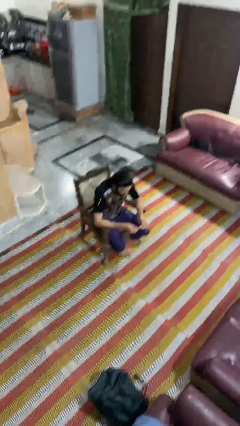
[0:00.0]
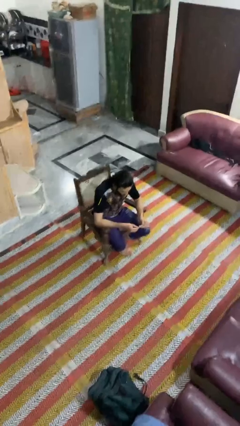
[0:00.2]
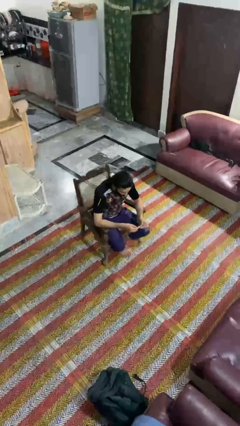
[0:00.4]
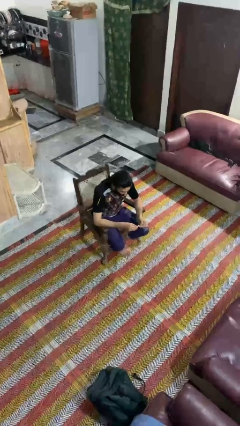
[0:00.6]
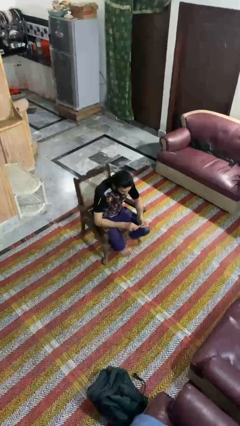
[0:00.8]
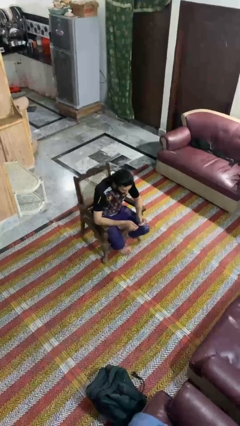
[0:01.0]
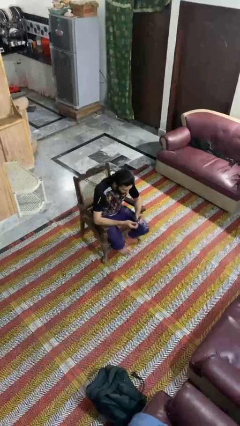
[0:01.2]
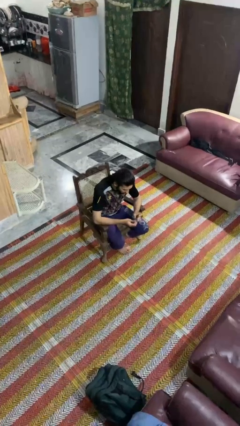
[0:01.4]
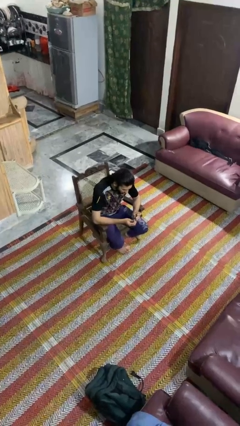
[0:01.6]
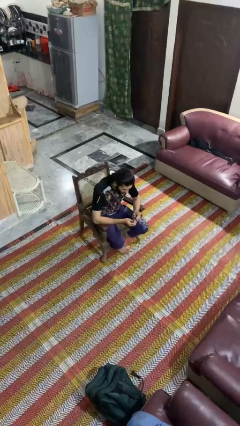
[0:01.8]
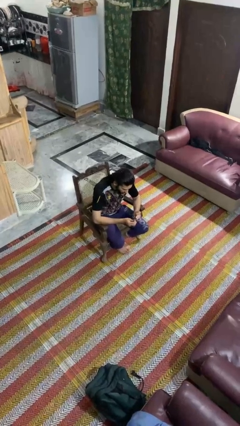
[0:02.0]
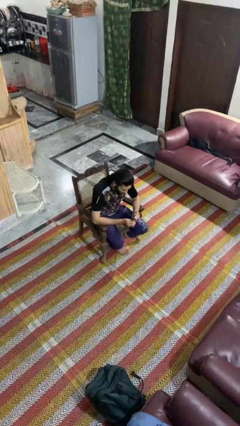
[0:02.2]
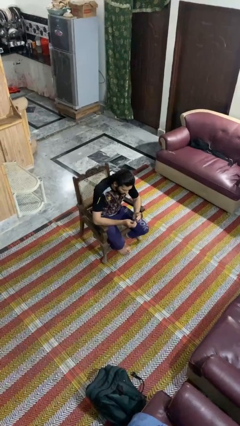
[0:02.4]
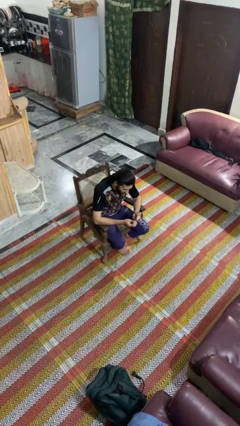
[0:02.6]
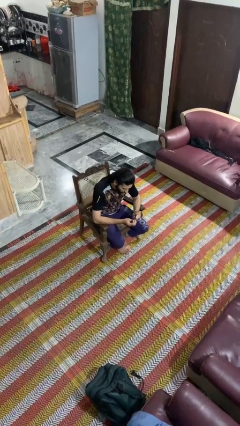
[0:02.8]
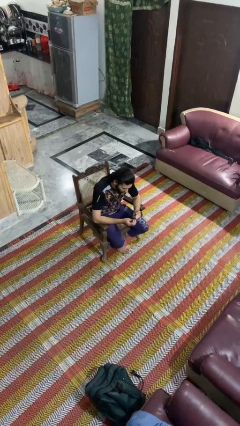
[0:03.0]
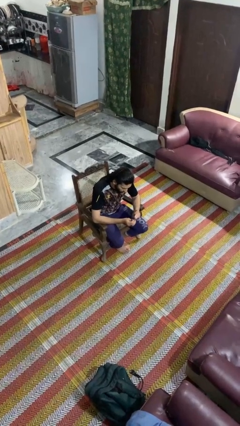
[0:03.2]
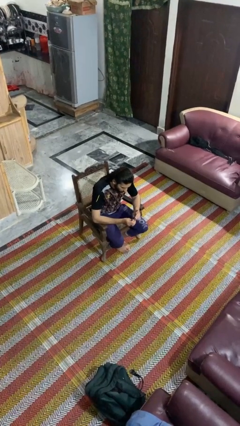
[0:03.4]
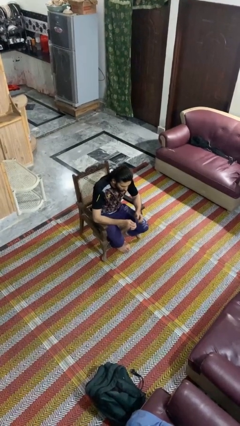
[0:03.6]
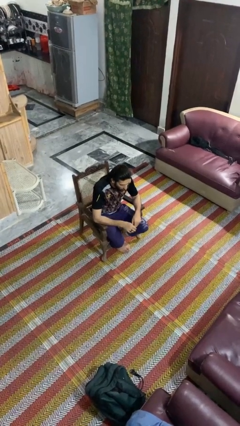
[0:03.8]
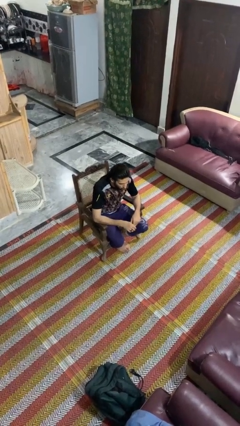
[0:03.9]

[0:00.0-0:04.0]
person clips fingernails

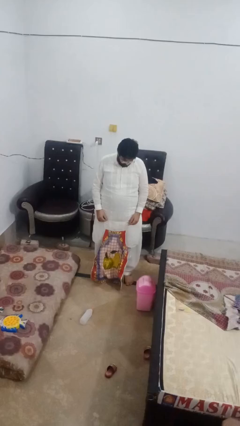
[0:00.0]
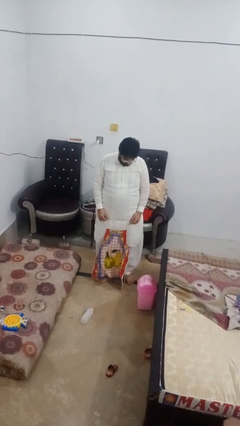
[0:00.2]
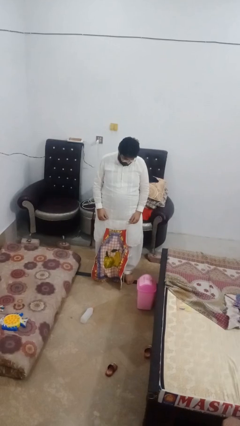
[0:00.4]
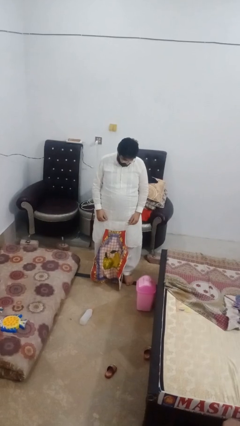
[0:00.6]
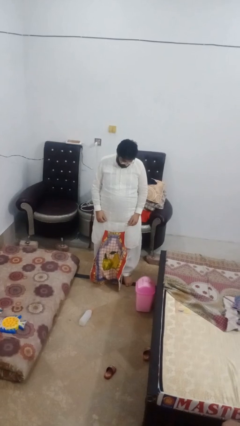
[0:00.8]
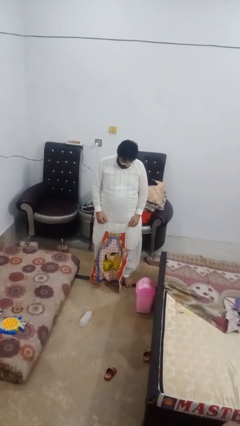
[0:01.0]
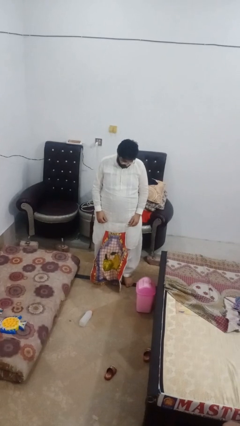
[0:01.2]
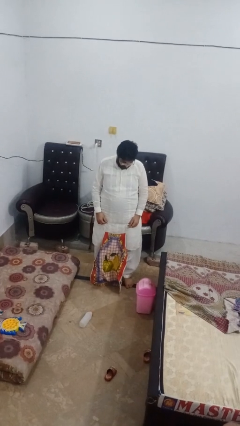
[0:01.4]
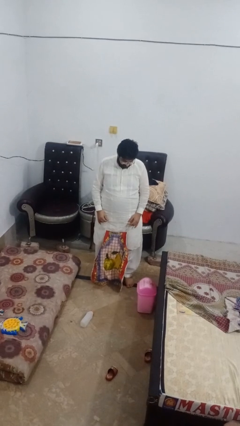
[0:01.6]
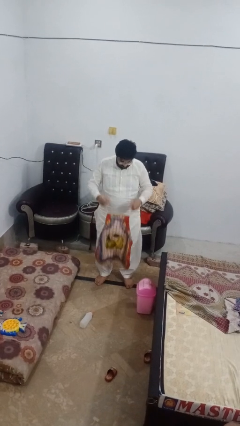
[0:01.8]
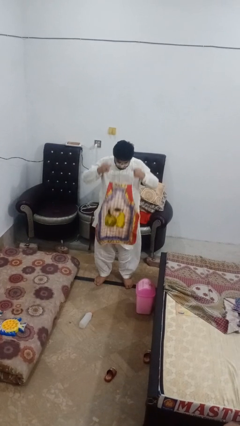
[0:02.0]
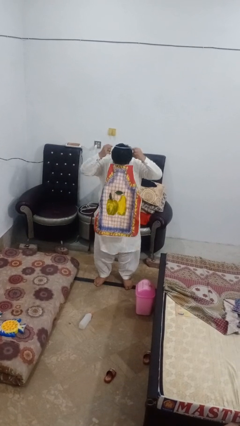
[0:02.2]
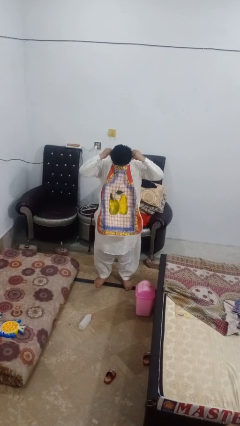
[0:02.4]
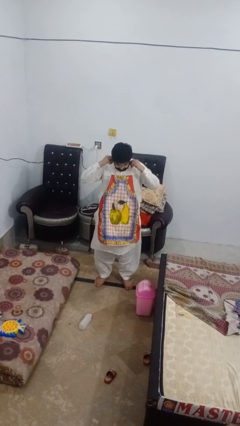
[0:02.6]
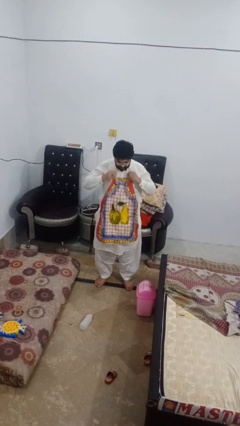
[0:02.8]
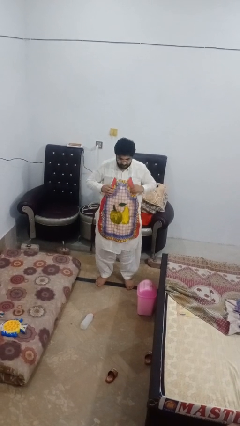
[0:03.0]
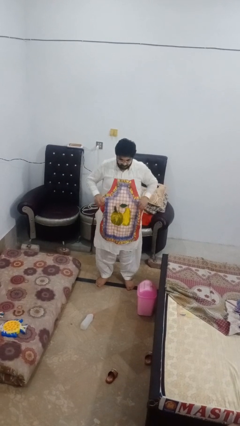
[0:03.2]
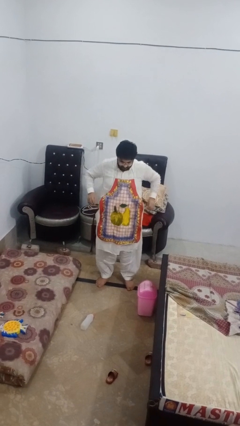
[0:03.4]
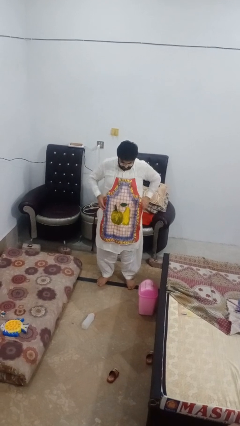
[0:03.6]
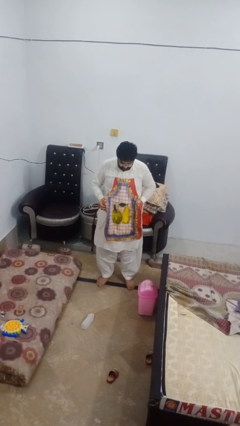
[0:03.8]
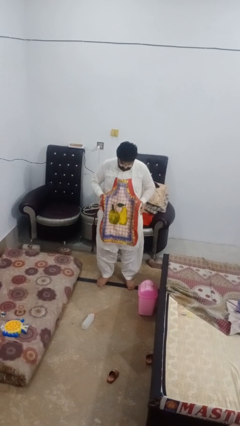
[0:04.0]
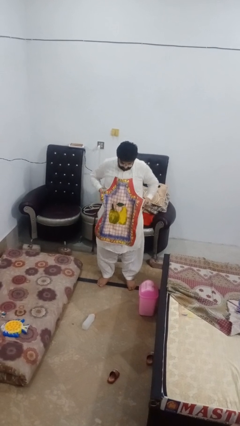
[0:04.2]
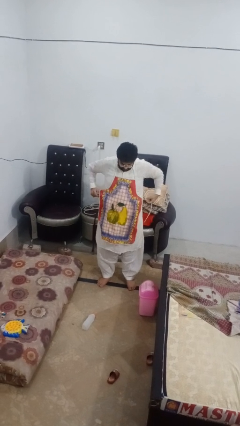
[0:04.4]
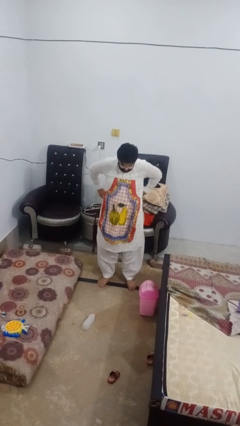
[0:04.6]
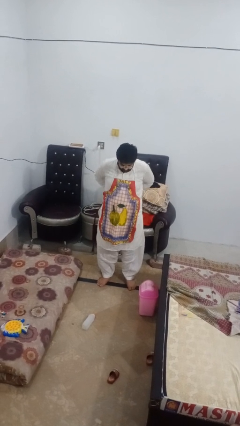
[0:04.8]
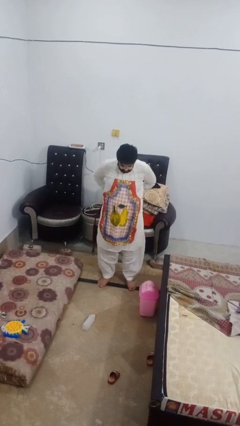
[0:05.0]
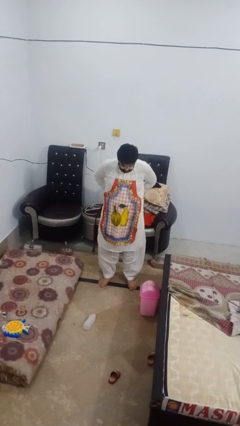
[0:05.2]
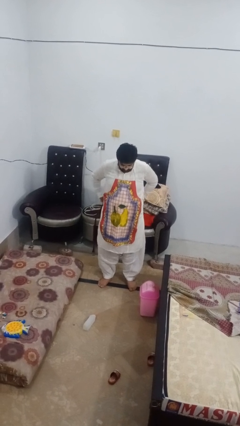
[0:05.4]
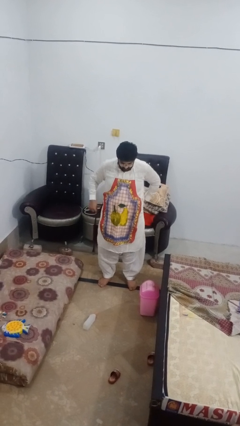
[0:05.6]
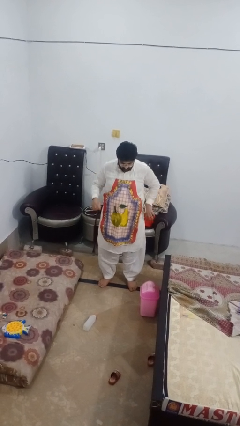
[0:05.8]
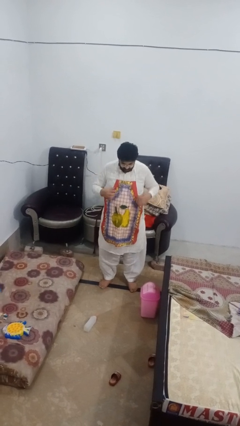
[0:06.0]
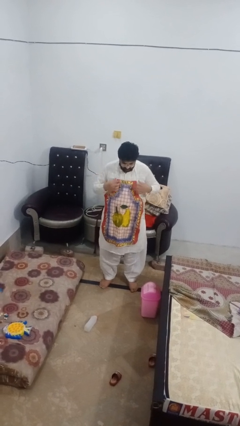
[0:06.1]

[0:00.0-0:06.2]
person puts on apron

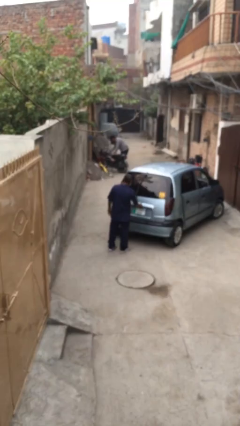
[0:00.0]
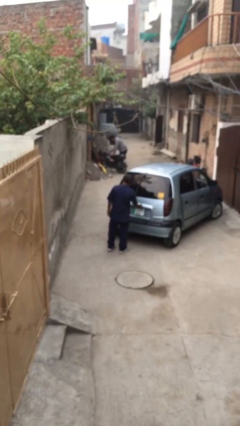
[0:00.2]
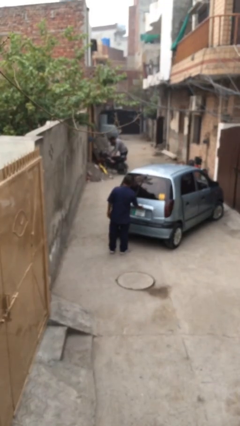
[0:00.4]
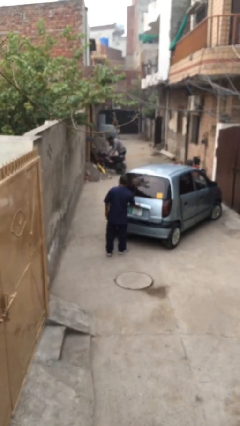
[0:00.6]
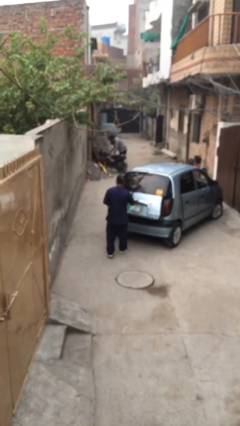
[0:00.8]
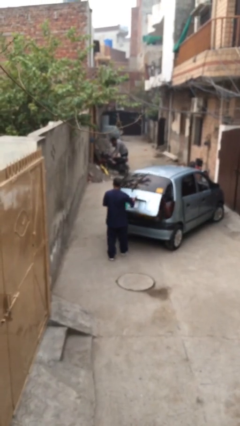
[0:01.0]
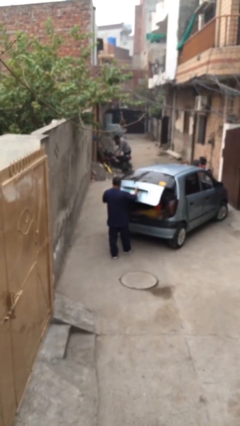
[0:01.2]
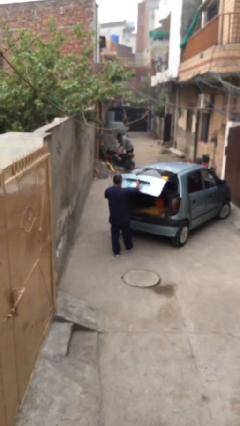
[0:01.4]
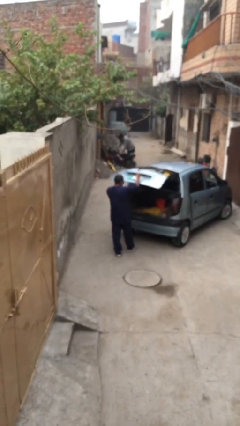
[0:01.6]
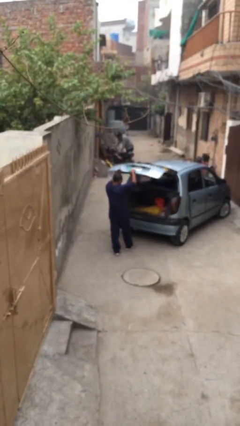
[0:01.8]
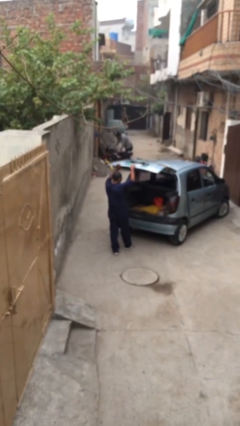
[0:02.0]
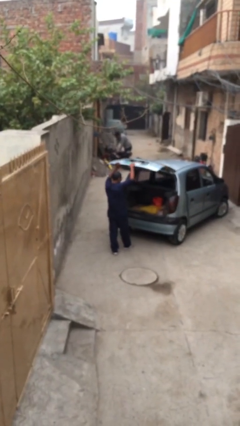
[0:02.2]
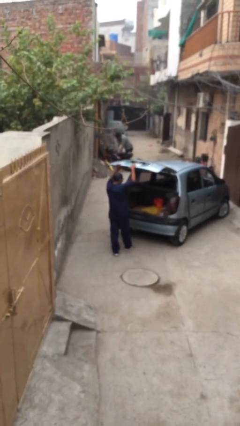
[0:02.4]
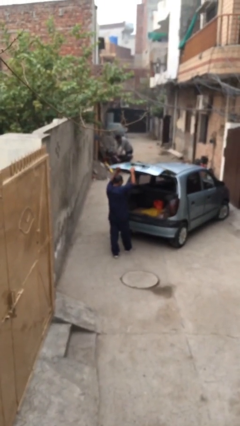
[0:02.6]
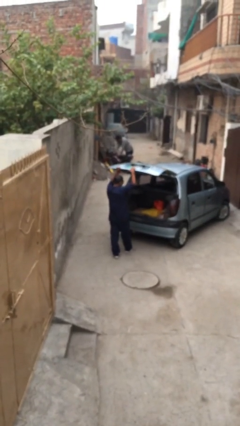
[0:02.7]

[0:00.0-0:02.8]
person opens car trunk

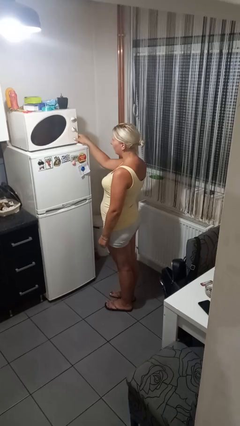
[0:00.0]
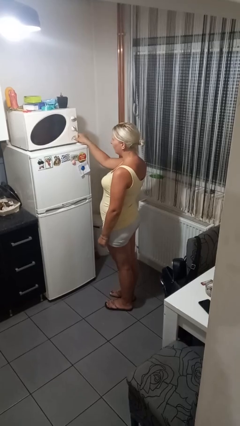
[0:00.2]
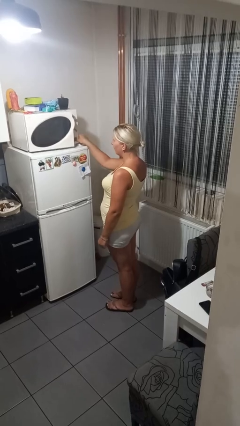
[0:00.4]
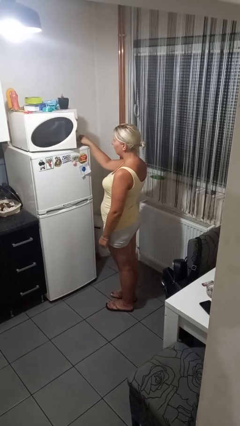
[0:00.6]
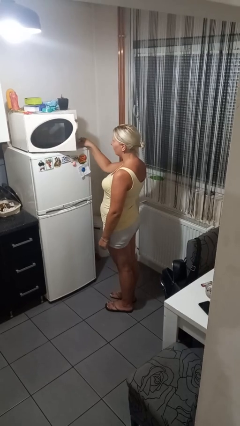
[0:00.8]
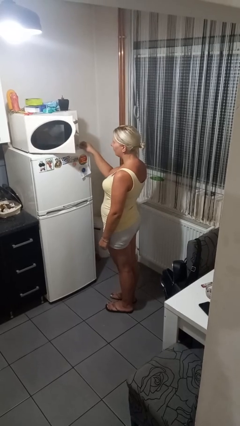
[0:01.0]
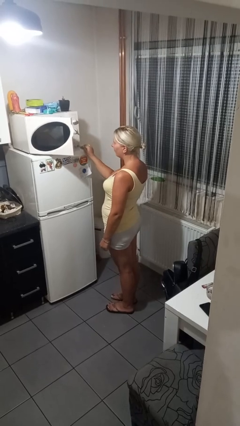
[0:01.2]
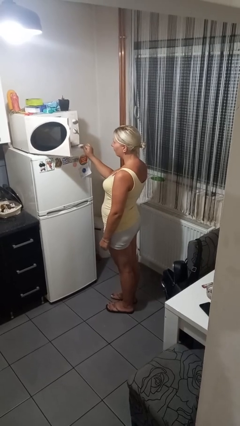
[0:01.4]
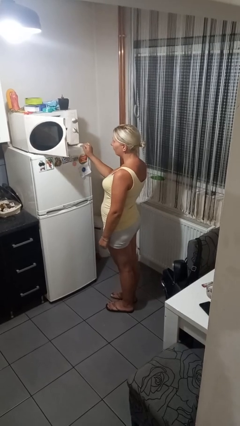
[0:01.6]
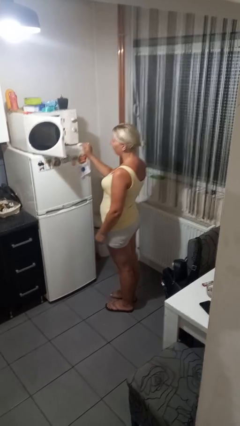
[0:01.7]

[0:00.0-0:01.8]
person opens microwave

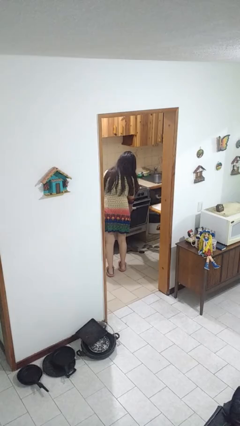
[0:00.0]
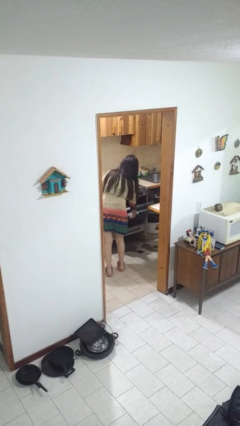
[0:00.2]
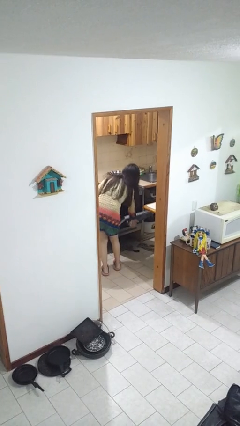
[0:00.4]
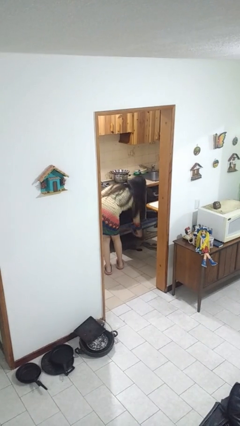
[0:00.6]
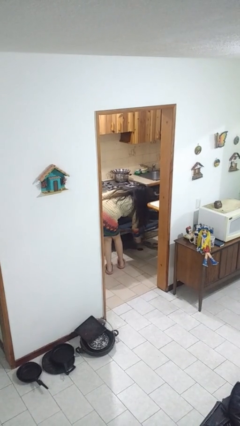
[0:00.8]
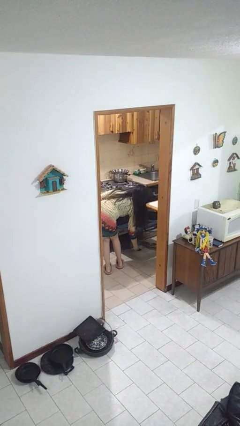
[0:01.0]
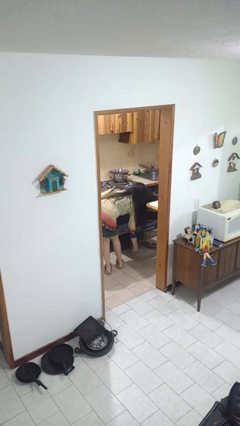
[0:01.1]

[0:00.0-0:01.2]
person opens oven door

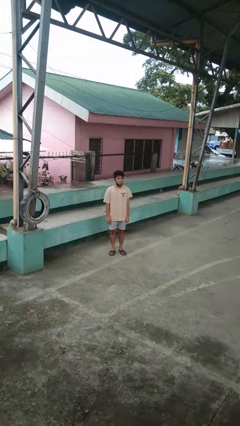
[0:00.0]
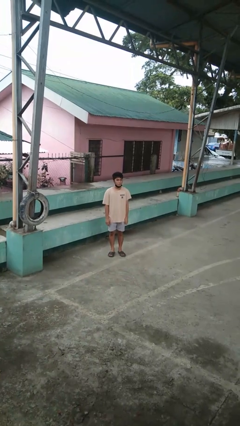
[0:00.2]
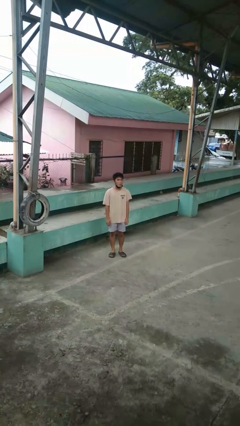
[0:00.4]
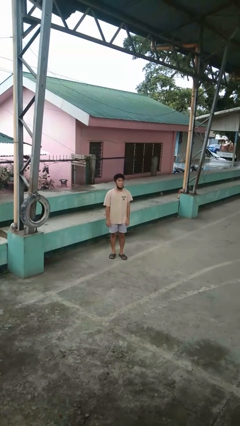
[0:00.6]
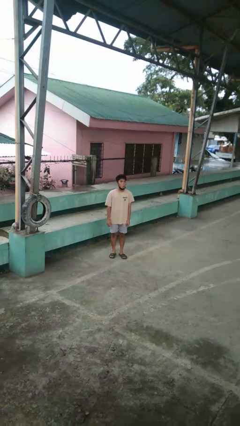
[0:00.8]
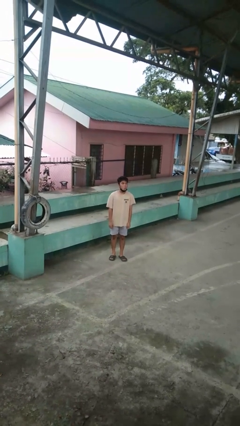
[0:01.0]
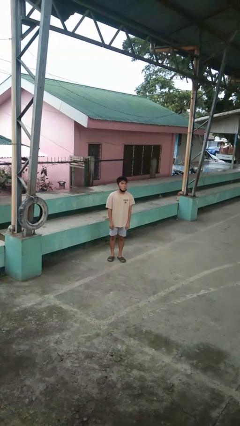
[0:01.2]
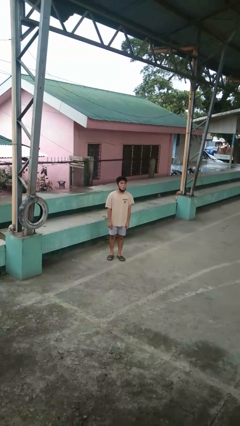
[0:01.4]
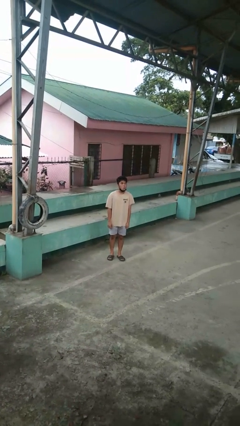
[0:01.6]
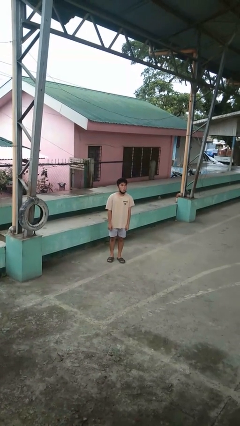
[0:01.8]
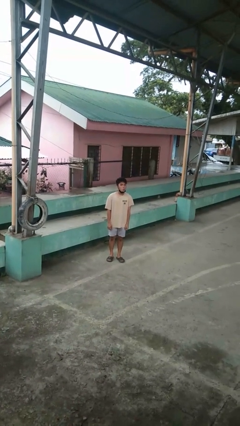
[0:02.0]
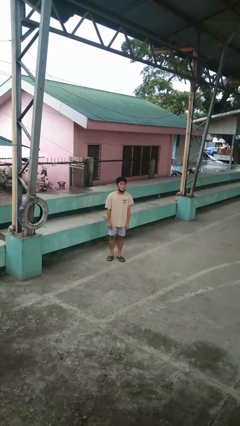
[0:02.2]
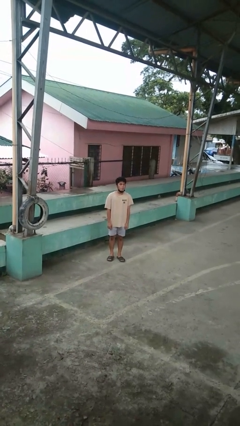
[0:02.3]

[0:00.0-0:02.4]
person sticks out tongue
